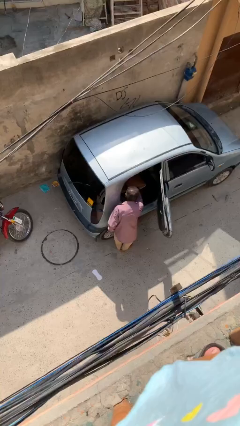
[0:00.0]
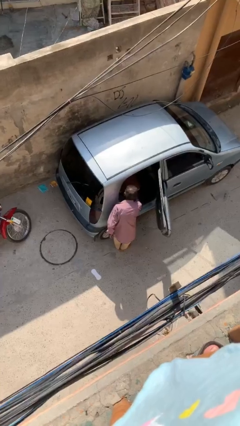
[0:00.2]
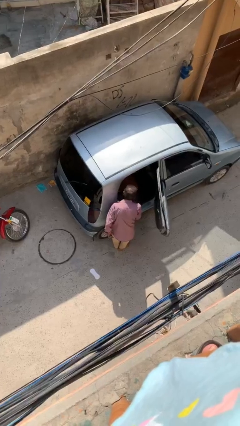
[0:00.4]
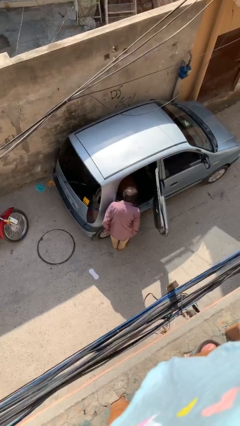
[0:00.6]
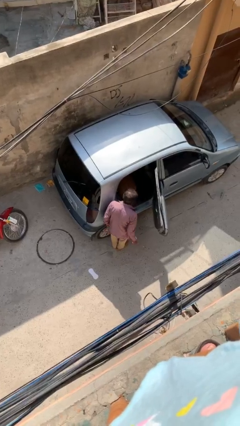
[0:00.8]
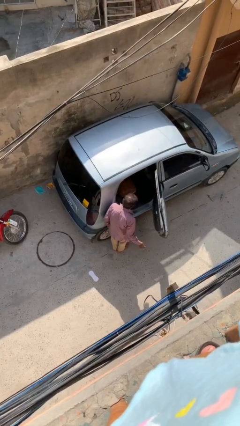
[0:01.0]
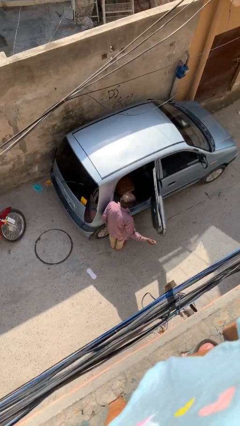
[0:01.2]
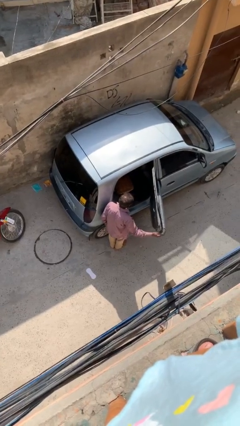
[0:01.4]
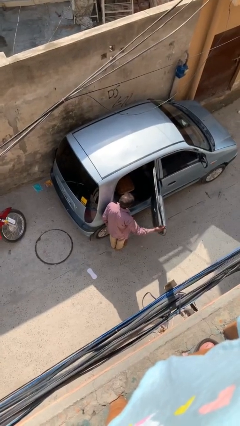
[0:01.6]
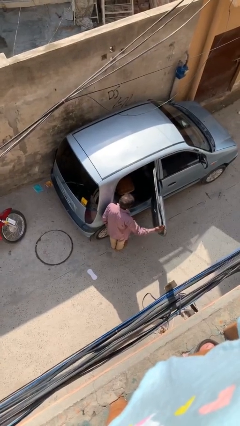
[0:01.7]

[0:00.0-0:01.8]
person loads car

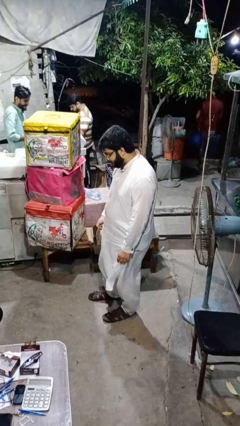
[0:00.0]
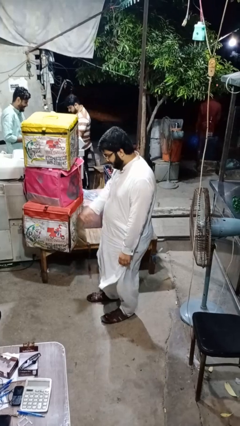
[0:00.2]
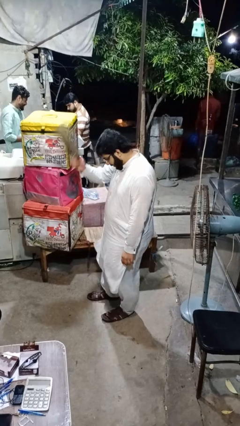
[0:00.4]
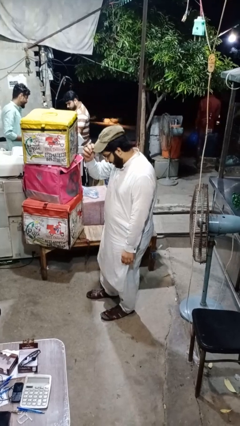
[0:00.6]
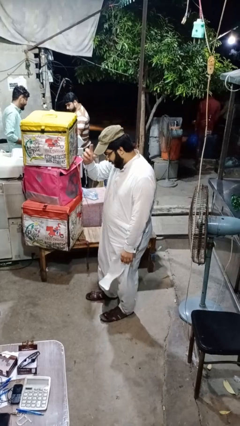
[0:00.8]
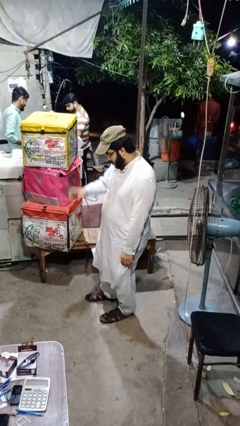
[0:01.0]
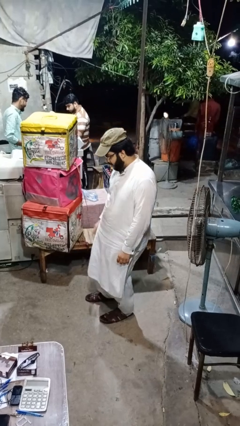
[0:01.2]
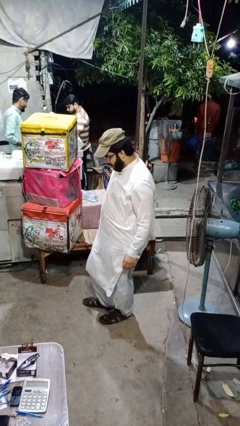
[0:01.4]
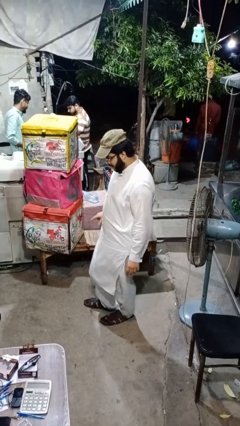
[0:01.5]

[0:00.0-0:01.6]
person puts on hat

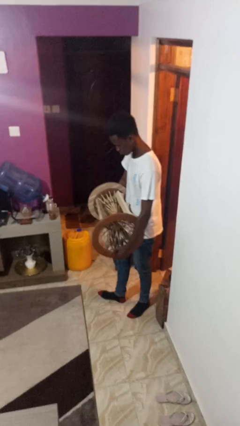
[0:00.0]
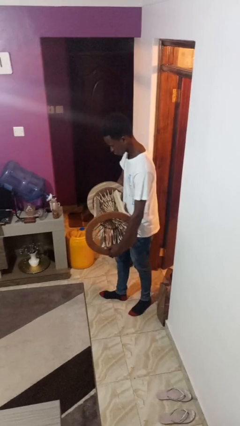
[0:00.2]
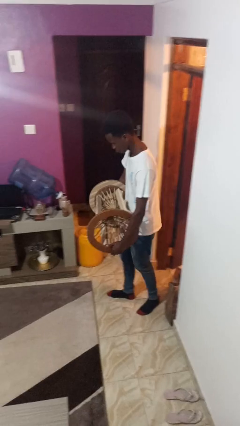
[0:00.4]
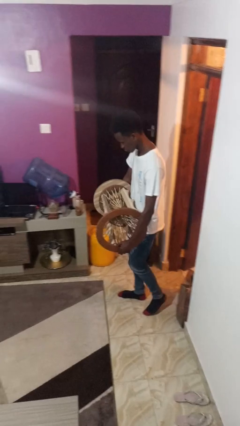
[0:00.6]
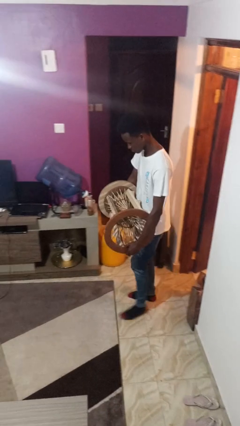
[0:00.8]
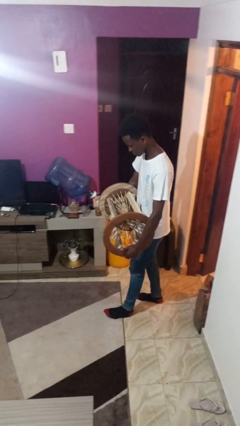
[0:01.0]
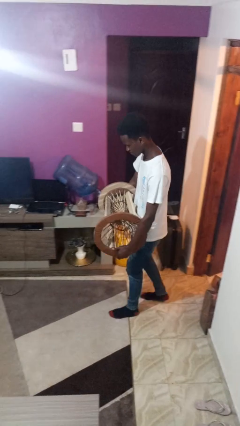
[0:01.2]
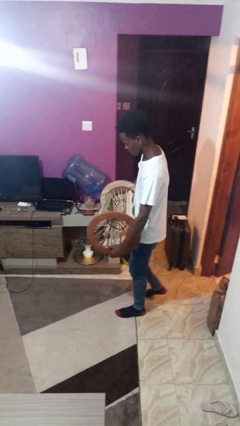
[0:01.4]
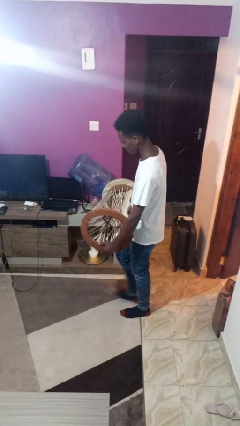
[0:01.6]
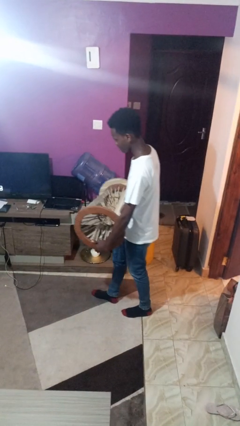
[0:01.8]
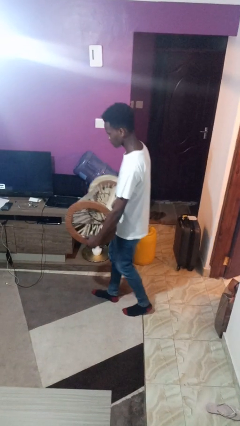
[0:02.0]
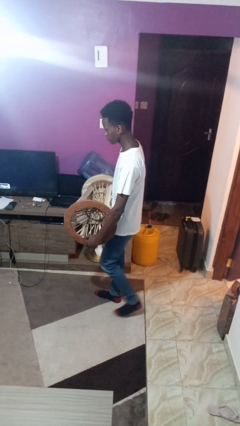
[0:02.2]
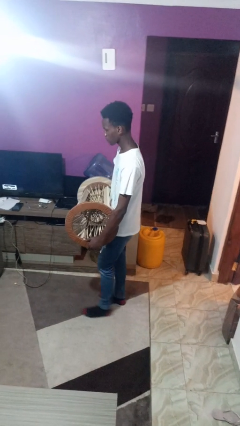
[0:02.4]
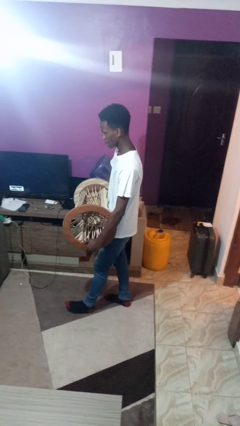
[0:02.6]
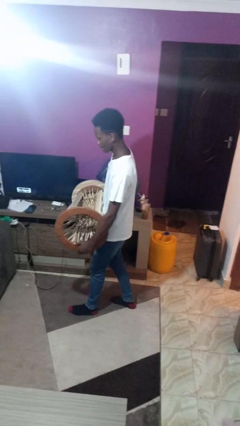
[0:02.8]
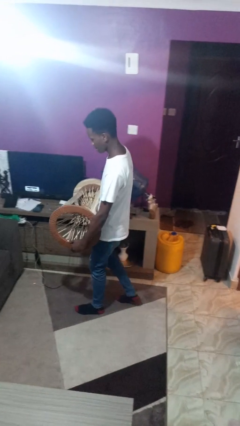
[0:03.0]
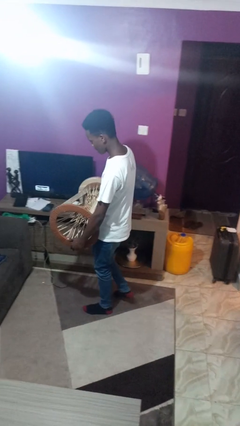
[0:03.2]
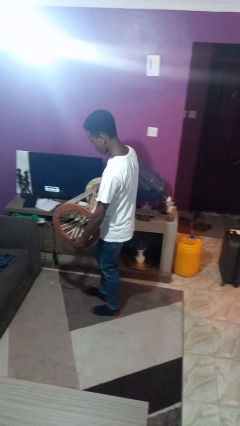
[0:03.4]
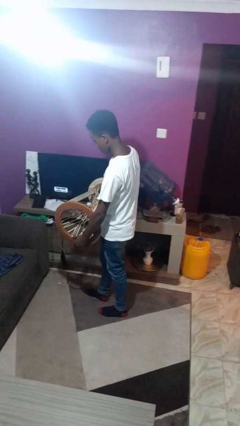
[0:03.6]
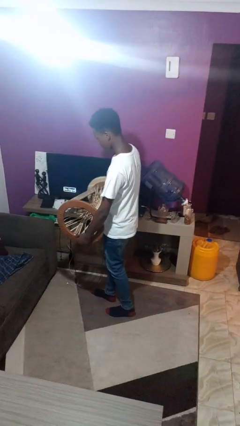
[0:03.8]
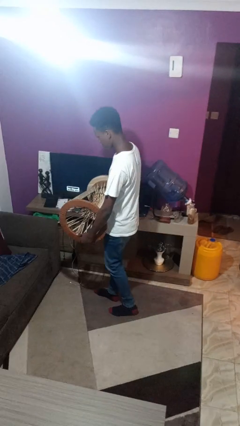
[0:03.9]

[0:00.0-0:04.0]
person carries furniture

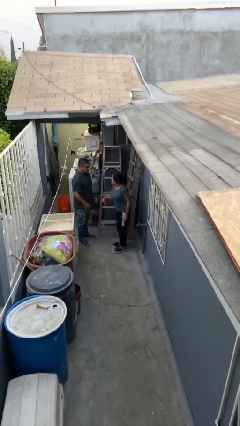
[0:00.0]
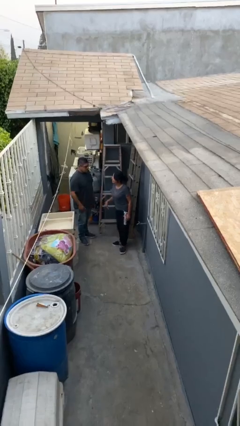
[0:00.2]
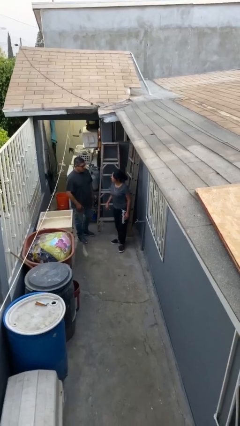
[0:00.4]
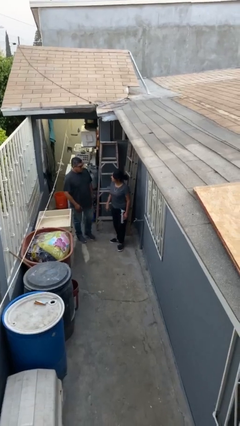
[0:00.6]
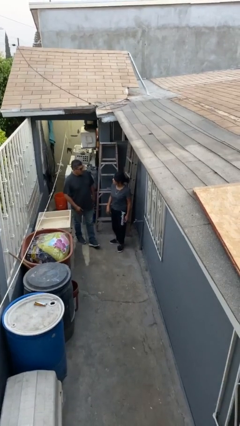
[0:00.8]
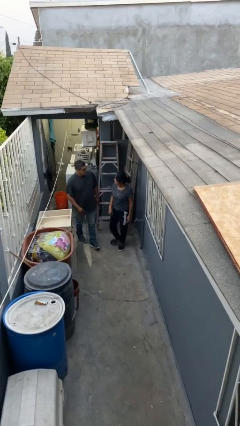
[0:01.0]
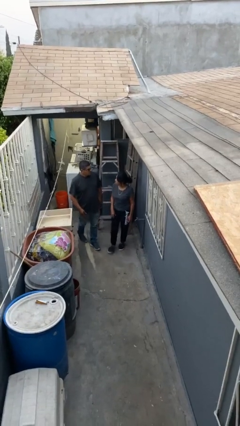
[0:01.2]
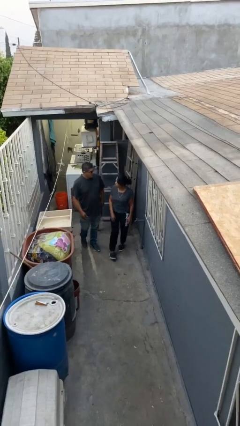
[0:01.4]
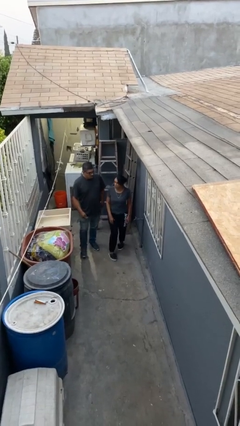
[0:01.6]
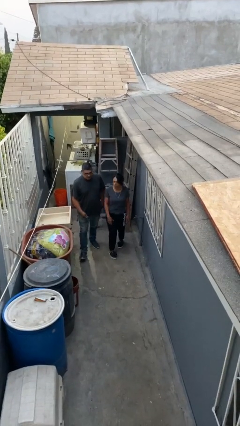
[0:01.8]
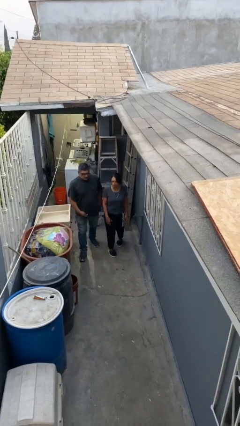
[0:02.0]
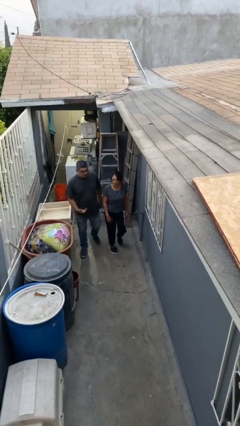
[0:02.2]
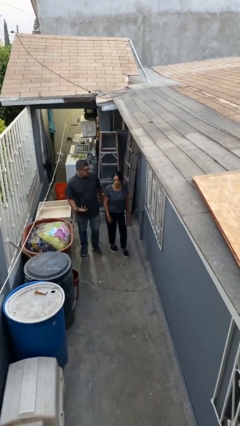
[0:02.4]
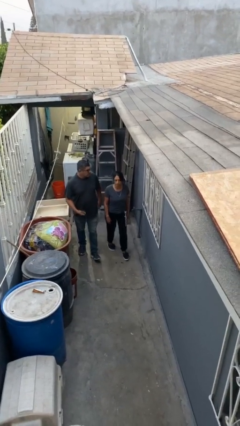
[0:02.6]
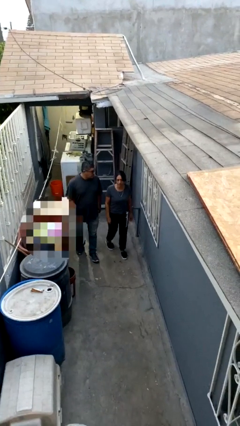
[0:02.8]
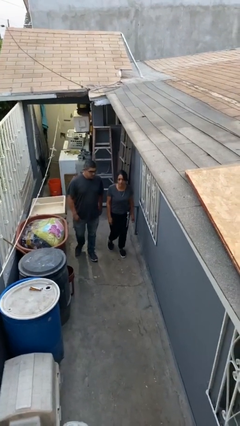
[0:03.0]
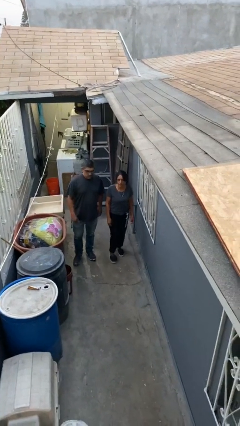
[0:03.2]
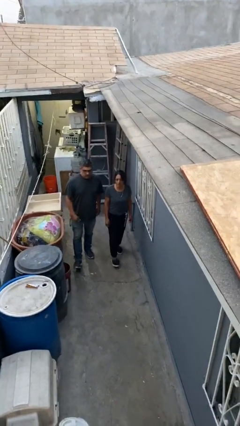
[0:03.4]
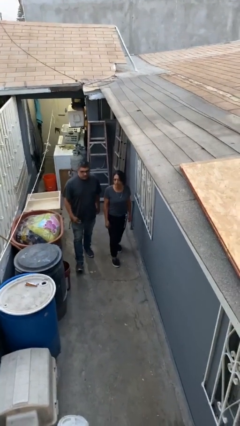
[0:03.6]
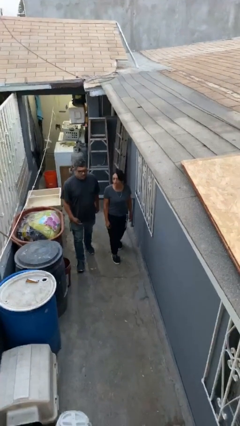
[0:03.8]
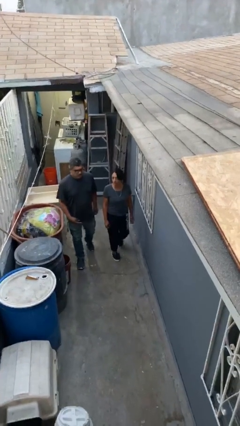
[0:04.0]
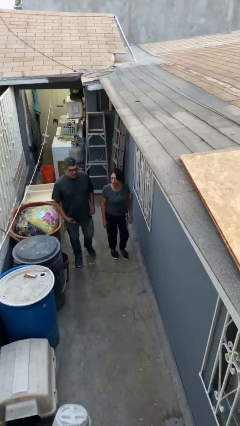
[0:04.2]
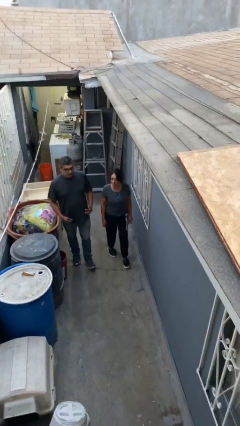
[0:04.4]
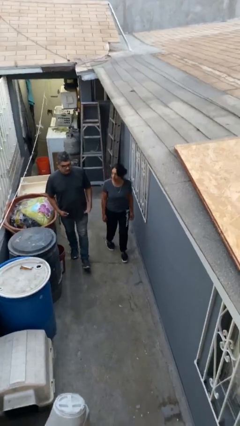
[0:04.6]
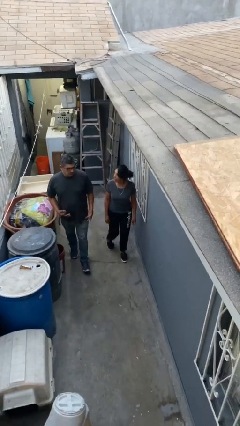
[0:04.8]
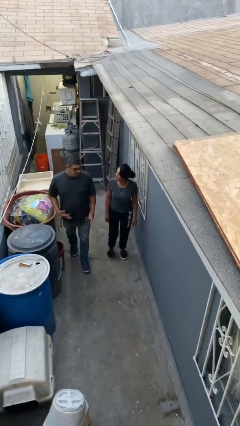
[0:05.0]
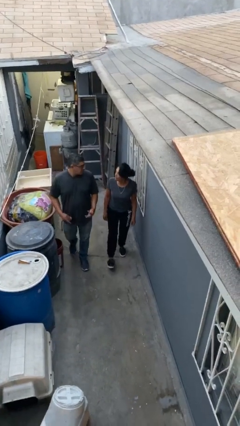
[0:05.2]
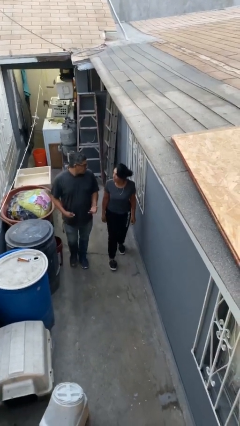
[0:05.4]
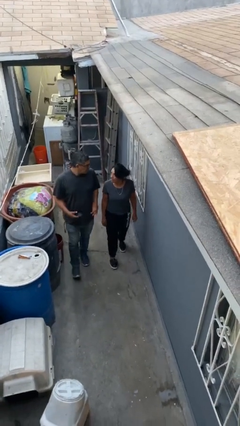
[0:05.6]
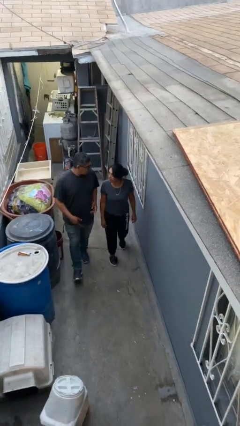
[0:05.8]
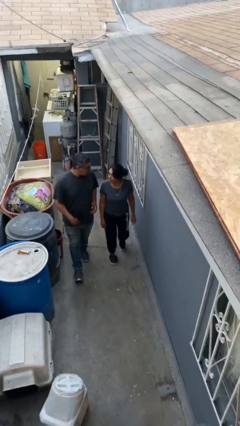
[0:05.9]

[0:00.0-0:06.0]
person talks to person

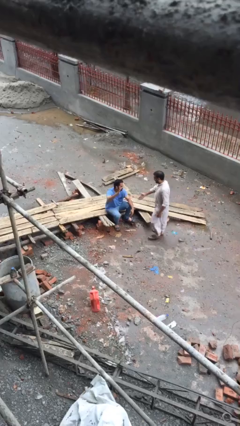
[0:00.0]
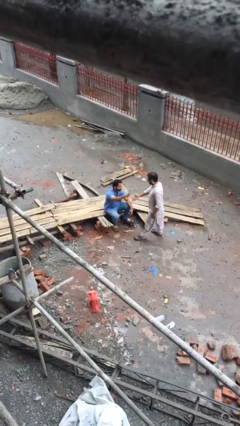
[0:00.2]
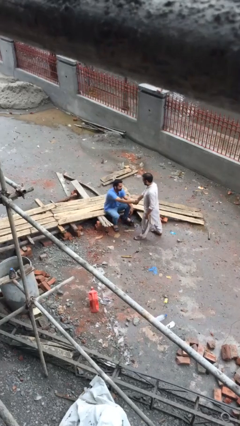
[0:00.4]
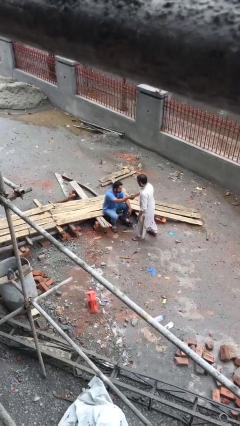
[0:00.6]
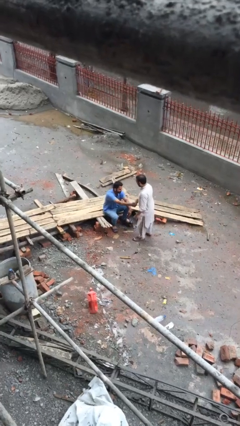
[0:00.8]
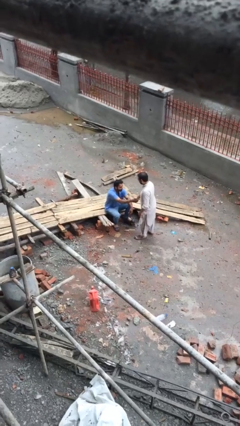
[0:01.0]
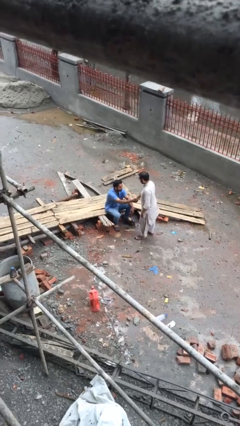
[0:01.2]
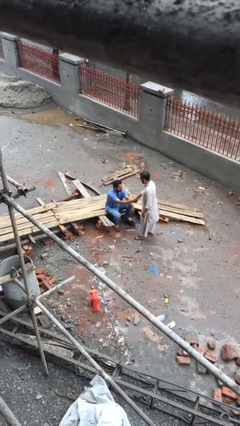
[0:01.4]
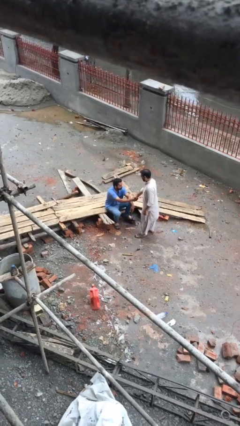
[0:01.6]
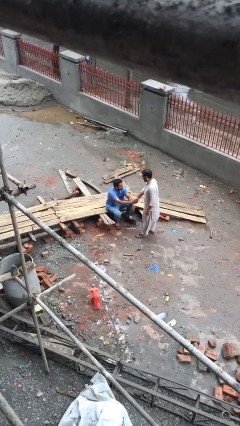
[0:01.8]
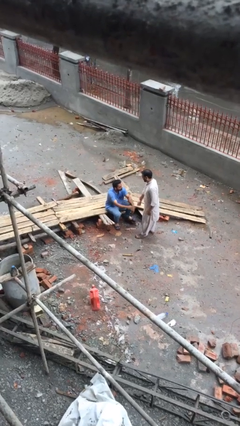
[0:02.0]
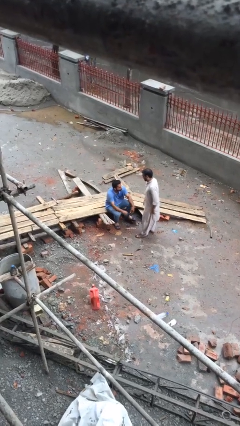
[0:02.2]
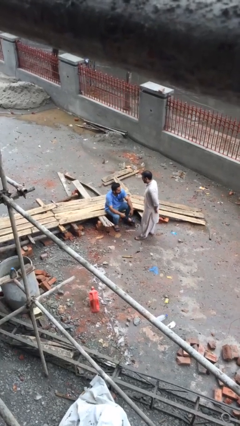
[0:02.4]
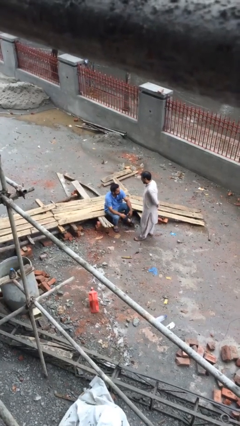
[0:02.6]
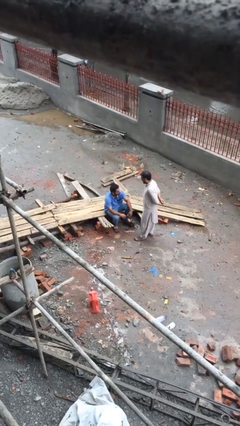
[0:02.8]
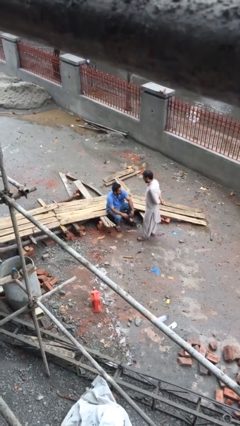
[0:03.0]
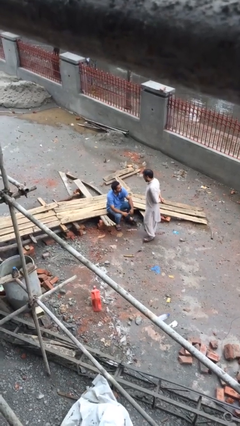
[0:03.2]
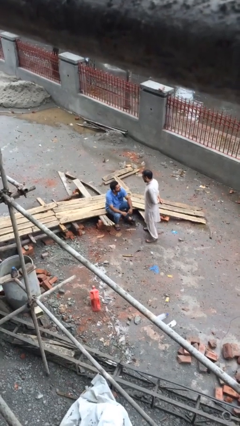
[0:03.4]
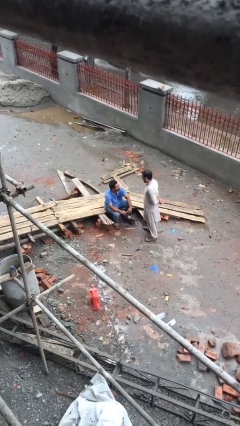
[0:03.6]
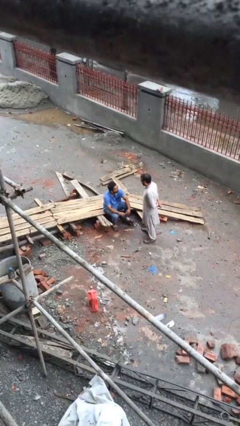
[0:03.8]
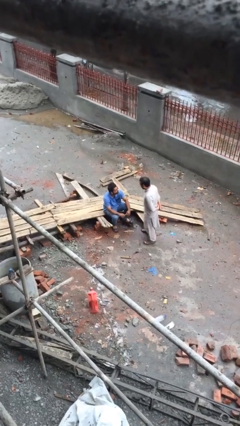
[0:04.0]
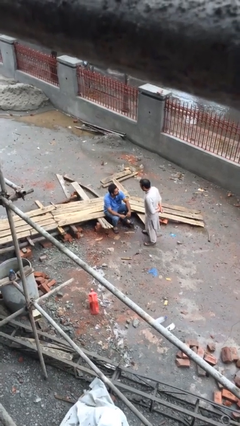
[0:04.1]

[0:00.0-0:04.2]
person shakes hand
